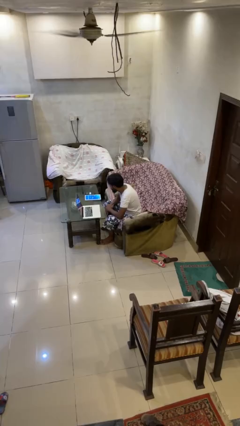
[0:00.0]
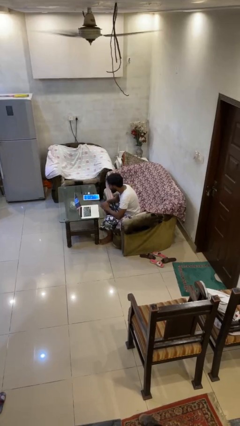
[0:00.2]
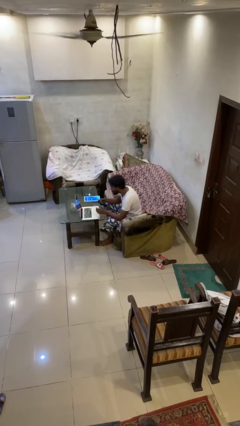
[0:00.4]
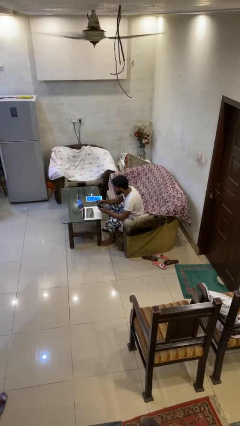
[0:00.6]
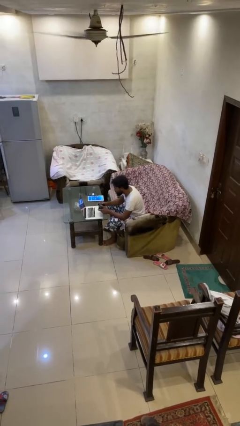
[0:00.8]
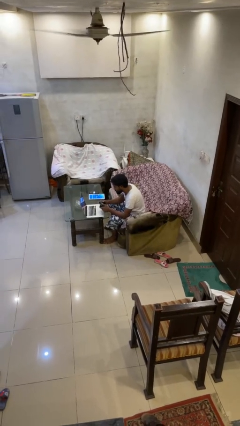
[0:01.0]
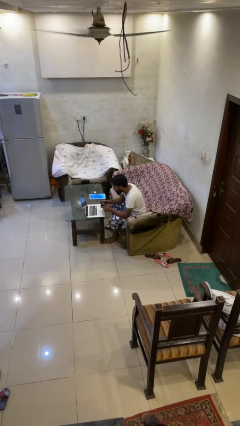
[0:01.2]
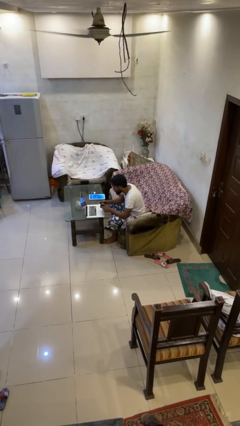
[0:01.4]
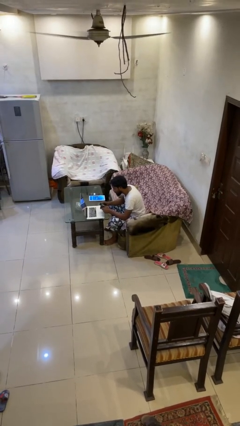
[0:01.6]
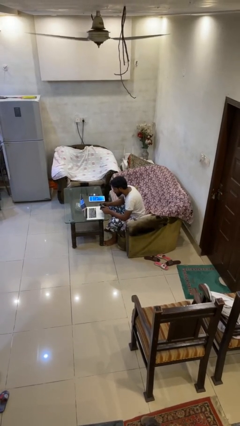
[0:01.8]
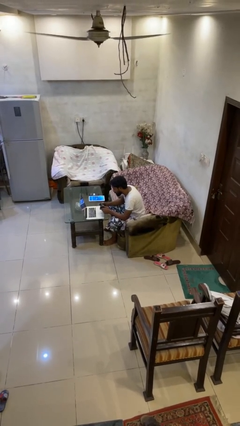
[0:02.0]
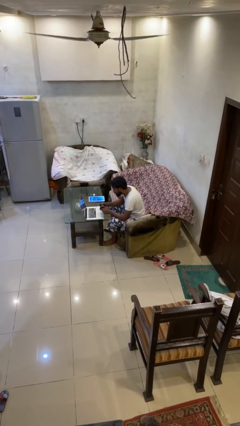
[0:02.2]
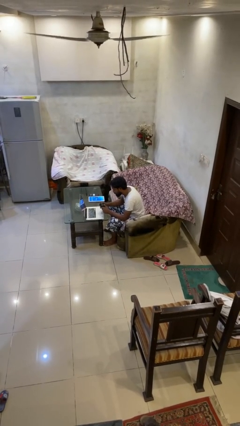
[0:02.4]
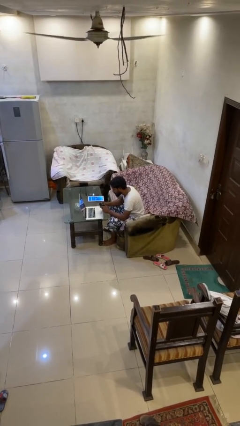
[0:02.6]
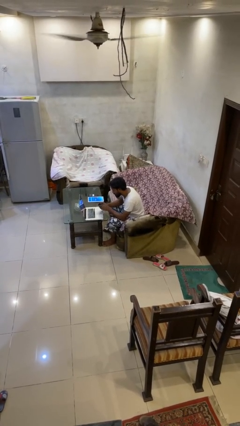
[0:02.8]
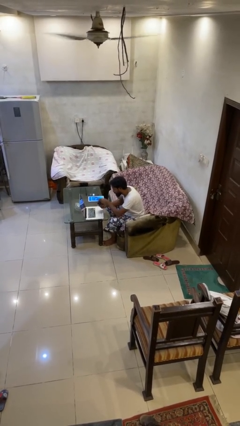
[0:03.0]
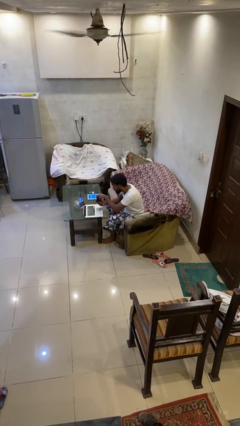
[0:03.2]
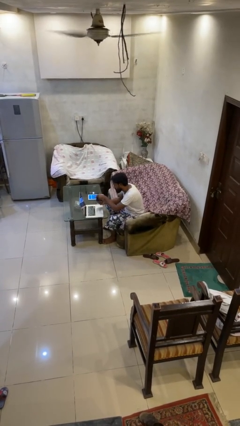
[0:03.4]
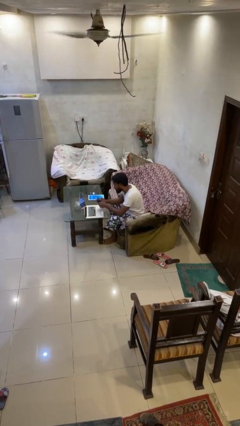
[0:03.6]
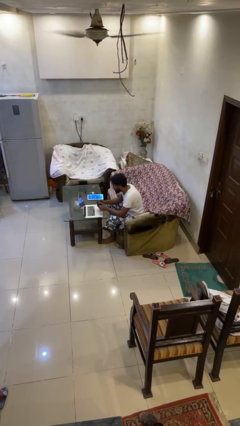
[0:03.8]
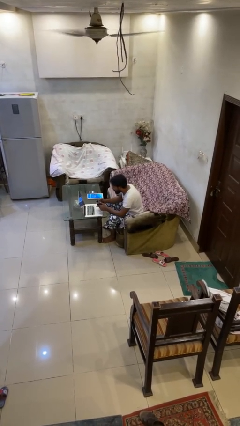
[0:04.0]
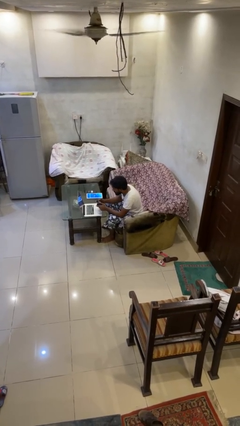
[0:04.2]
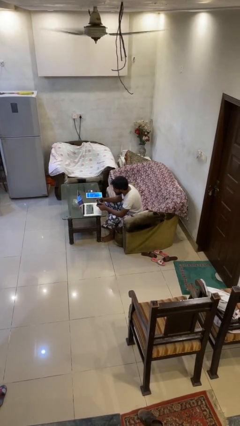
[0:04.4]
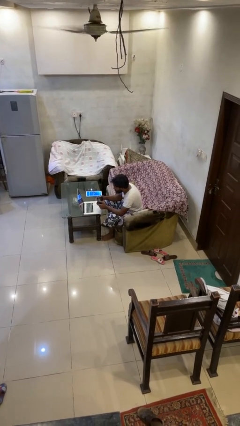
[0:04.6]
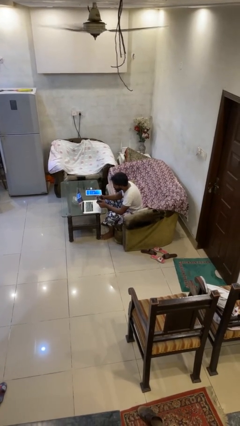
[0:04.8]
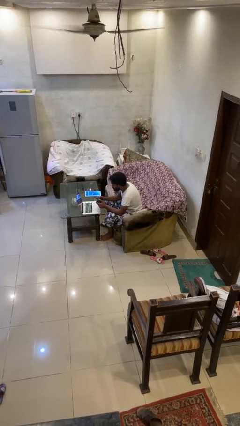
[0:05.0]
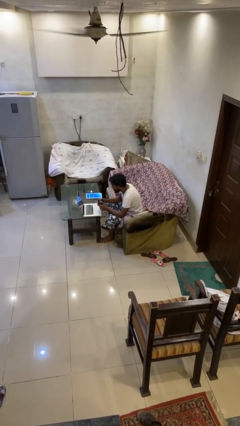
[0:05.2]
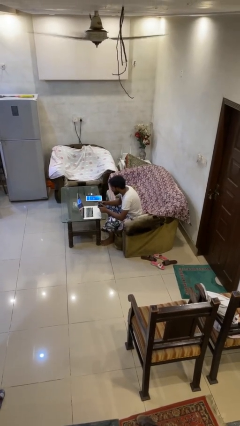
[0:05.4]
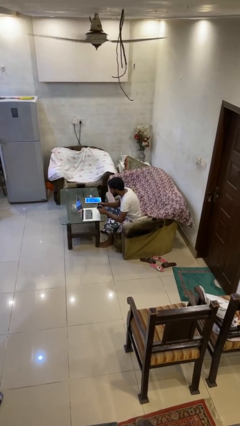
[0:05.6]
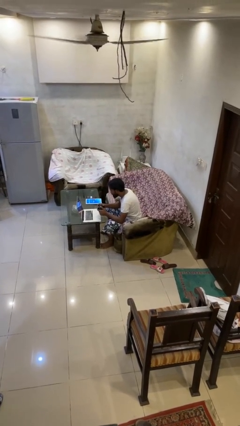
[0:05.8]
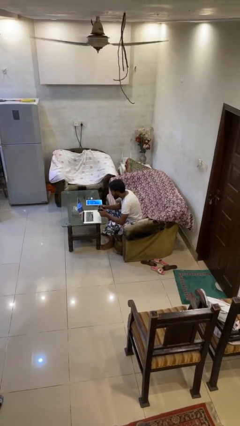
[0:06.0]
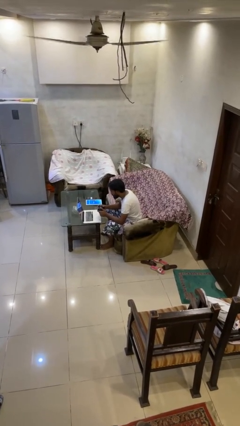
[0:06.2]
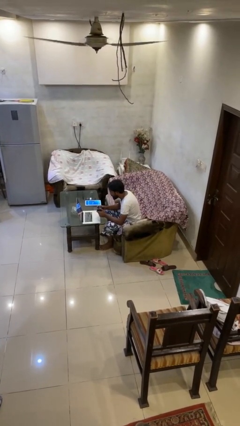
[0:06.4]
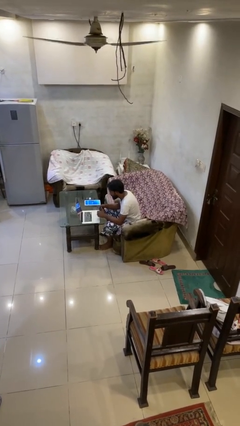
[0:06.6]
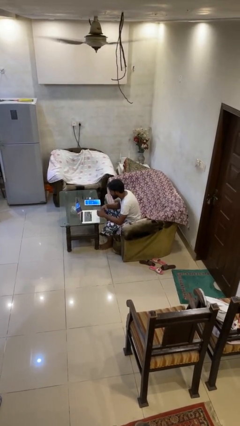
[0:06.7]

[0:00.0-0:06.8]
person interacts with handheld game

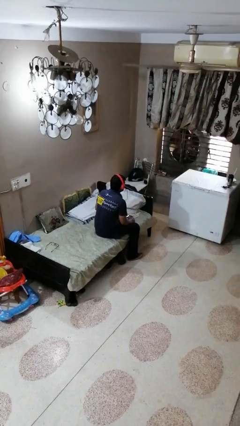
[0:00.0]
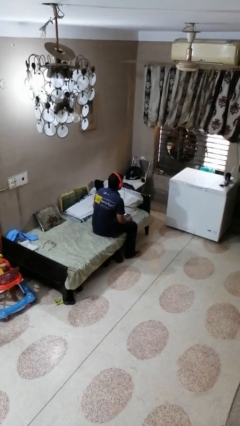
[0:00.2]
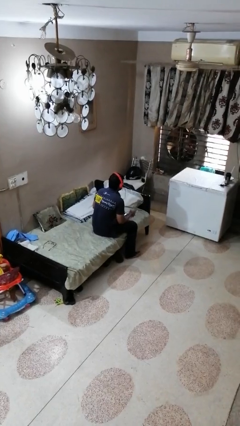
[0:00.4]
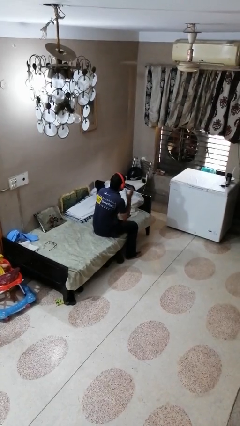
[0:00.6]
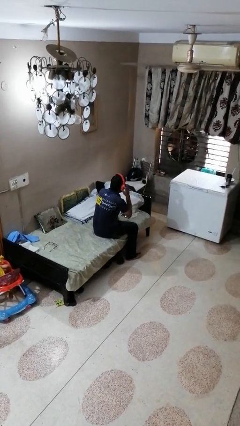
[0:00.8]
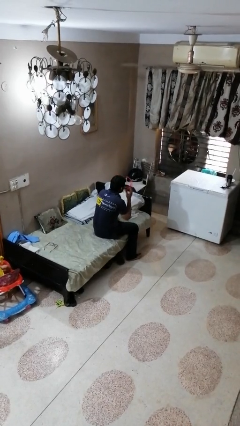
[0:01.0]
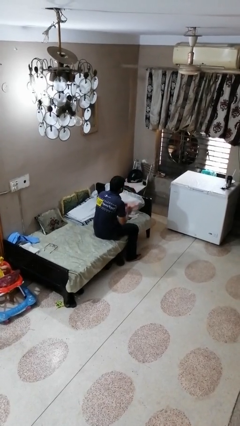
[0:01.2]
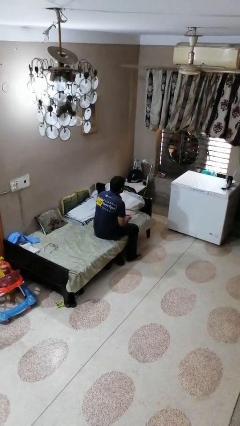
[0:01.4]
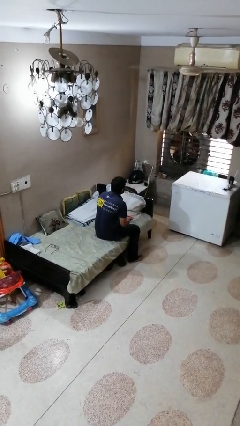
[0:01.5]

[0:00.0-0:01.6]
person takes off headphones

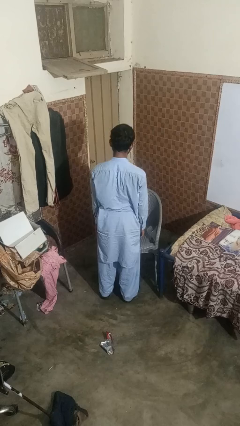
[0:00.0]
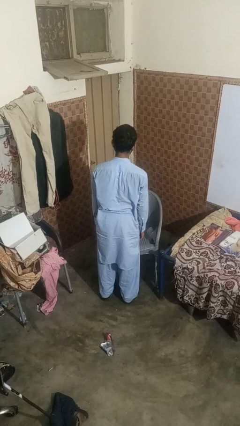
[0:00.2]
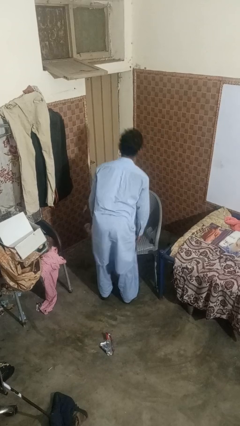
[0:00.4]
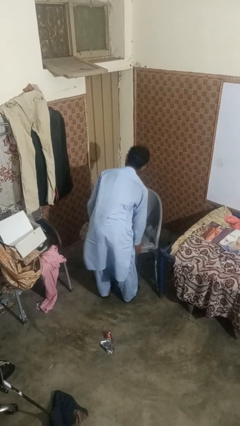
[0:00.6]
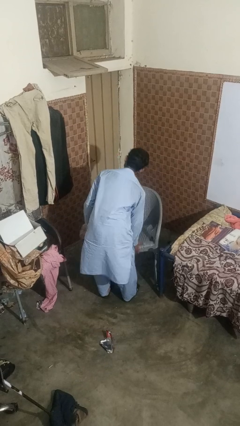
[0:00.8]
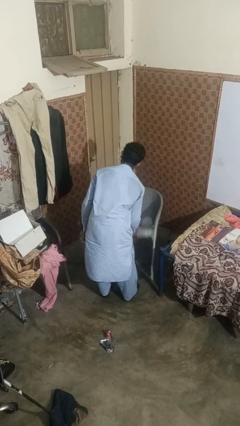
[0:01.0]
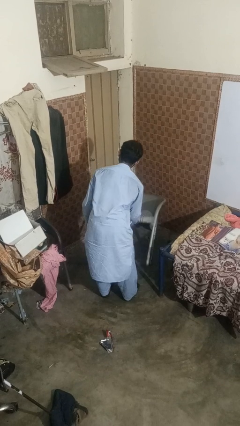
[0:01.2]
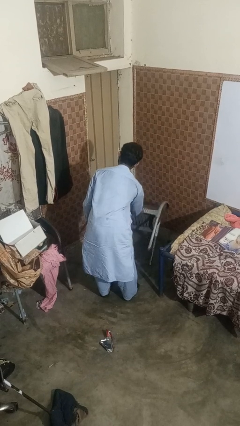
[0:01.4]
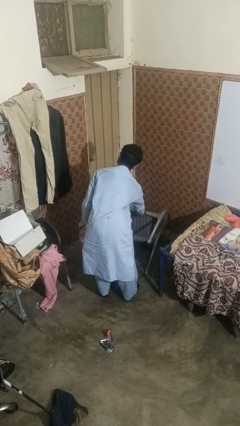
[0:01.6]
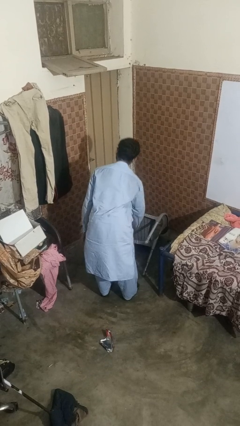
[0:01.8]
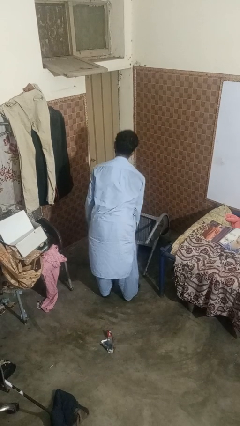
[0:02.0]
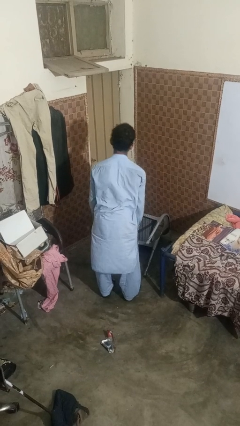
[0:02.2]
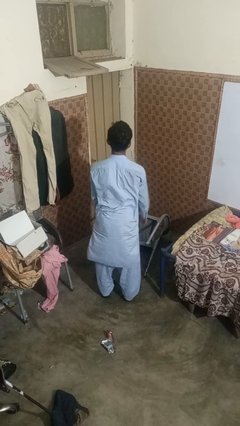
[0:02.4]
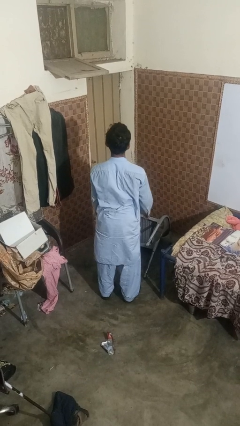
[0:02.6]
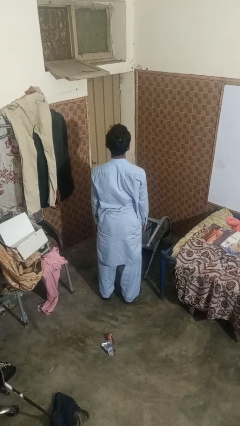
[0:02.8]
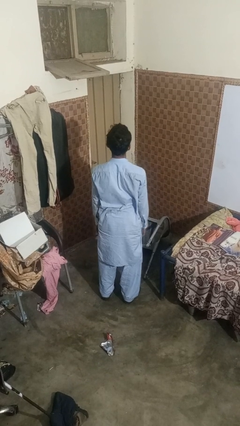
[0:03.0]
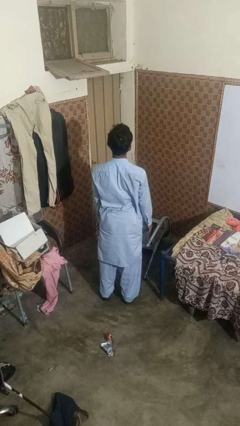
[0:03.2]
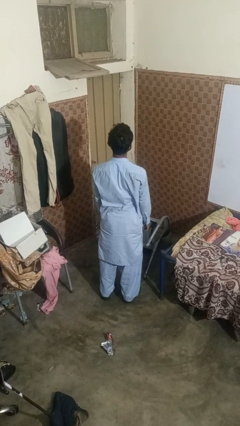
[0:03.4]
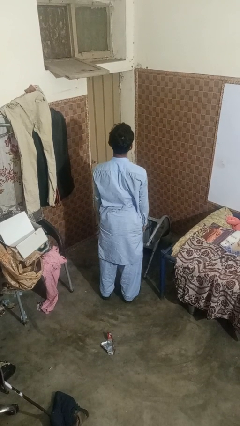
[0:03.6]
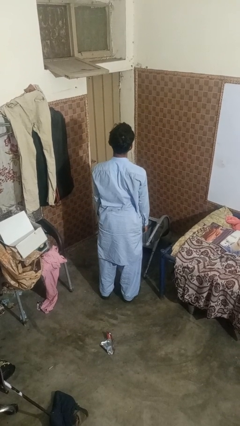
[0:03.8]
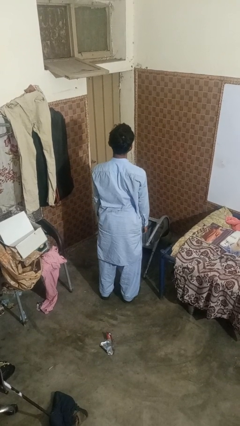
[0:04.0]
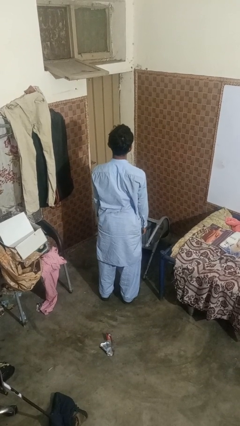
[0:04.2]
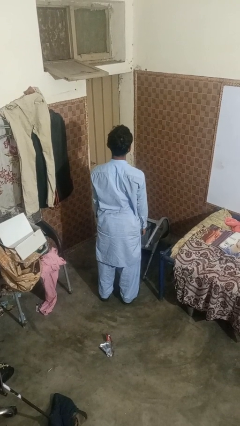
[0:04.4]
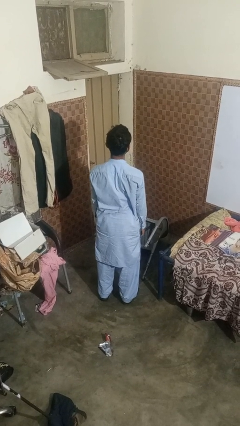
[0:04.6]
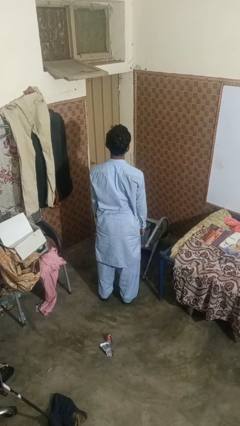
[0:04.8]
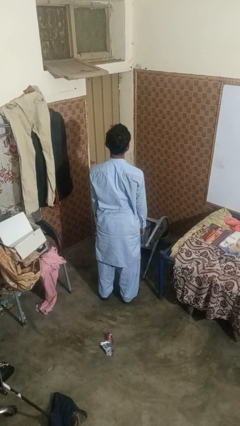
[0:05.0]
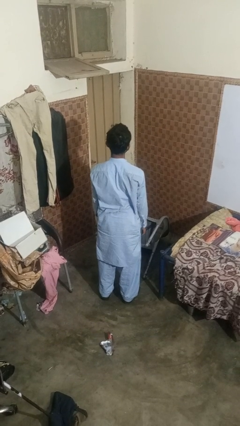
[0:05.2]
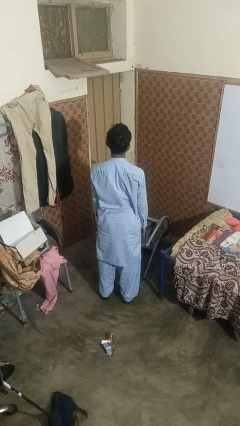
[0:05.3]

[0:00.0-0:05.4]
person knocks over furniture

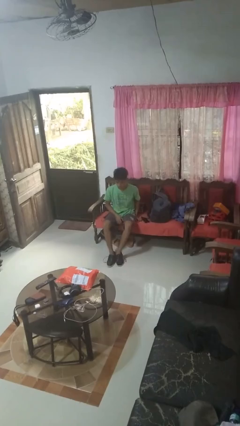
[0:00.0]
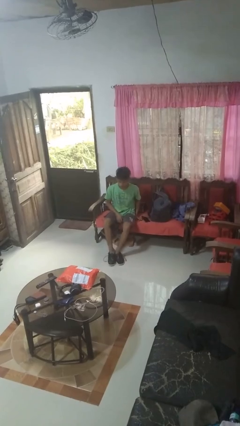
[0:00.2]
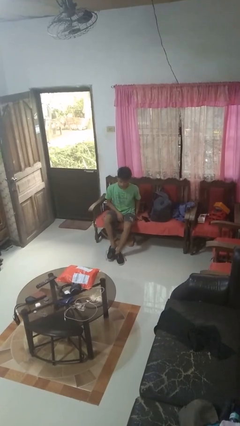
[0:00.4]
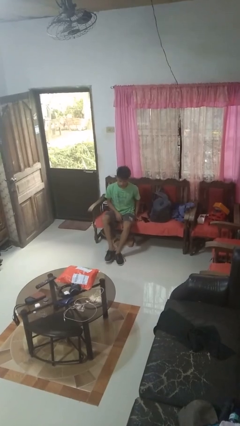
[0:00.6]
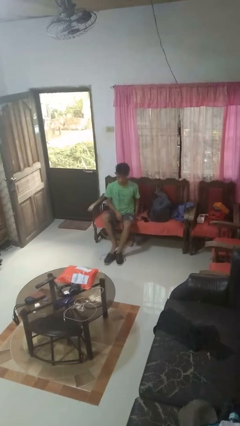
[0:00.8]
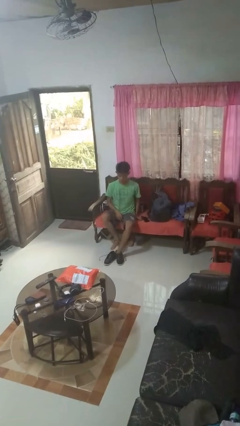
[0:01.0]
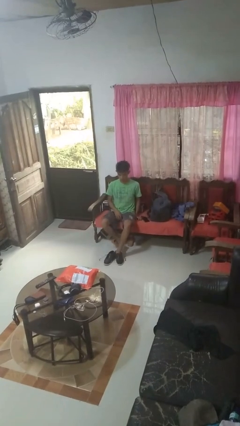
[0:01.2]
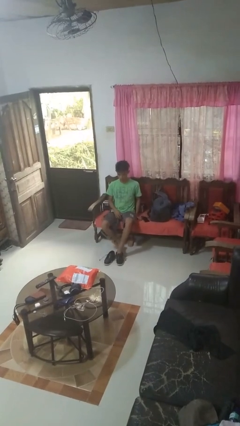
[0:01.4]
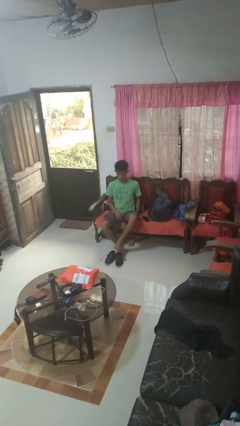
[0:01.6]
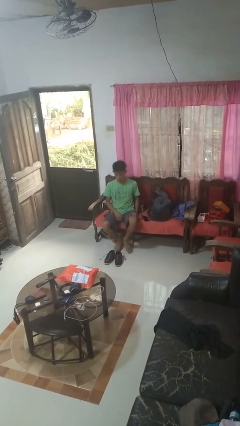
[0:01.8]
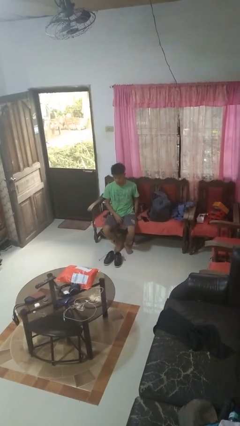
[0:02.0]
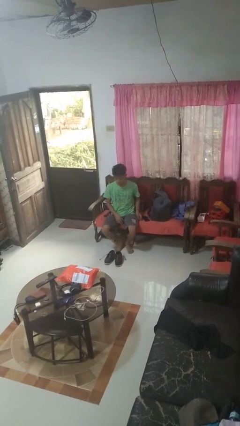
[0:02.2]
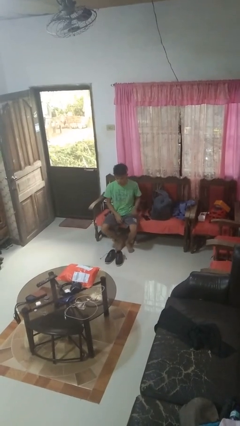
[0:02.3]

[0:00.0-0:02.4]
person takes off shoes

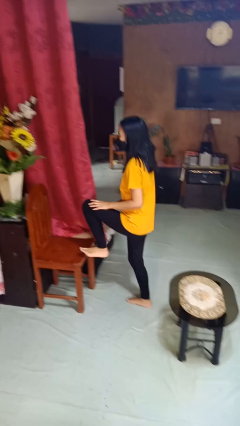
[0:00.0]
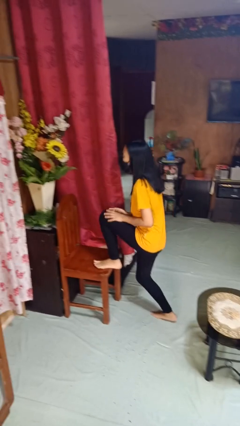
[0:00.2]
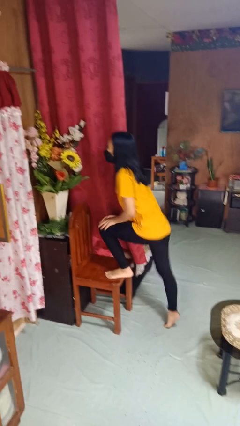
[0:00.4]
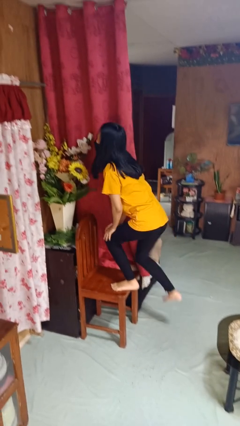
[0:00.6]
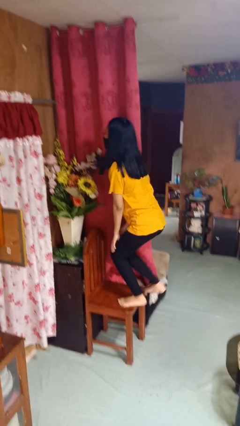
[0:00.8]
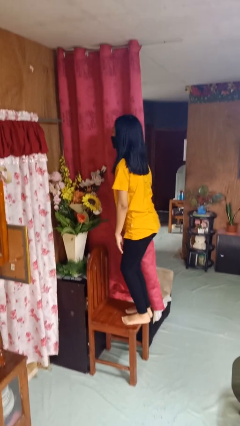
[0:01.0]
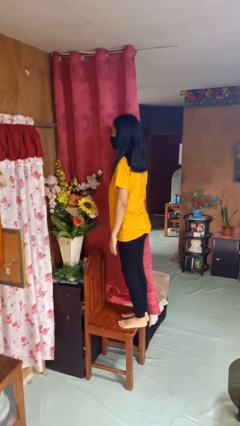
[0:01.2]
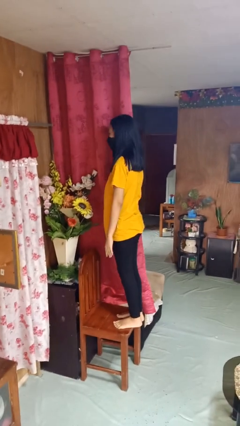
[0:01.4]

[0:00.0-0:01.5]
person climbs on chair
